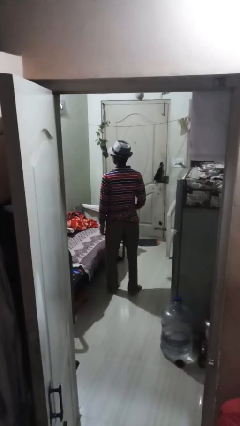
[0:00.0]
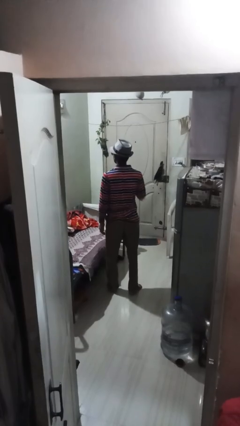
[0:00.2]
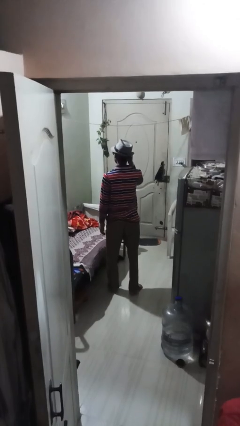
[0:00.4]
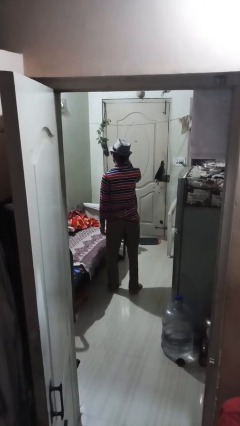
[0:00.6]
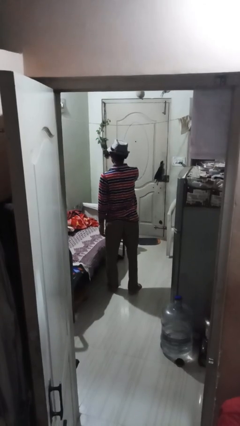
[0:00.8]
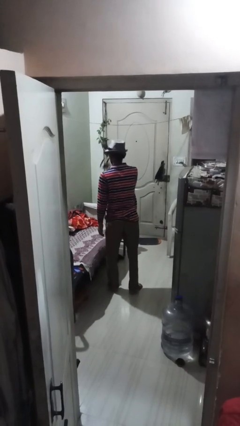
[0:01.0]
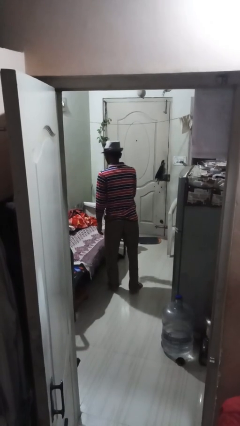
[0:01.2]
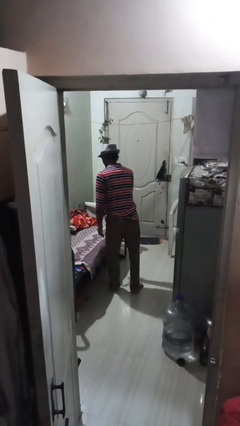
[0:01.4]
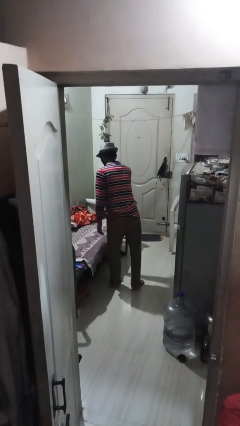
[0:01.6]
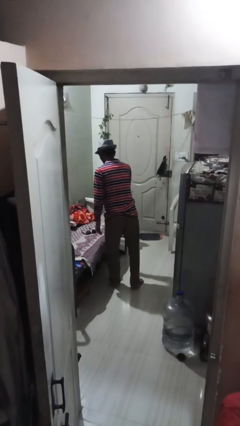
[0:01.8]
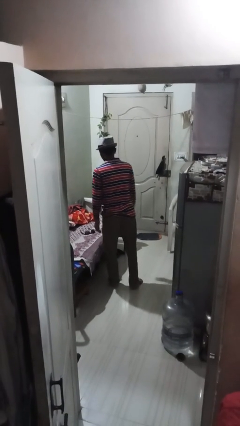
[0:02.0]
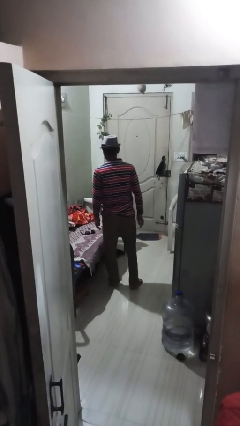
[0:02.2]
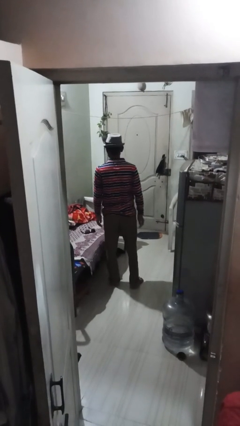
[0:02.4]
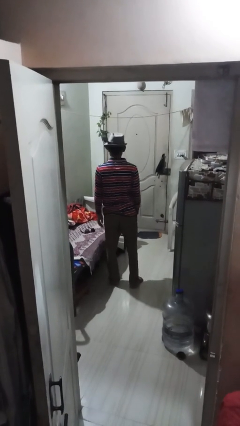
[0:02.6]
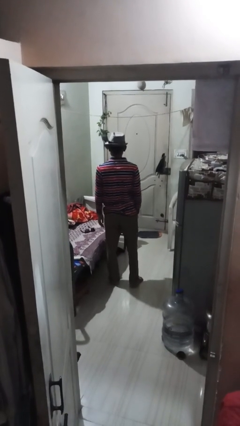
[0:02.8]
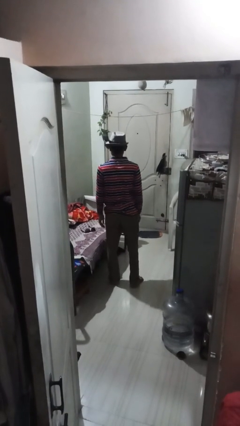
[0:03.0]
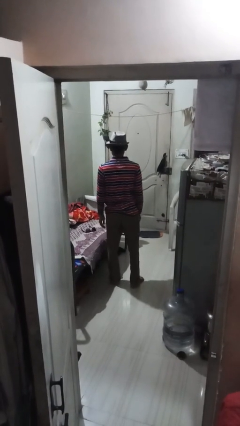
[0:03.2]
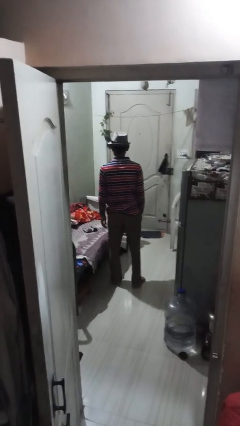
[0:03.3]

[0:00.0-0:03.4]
person takes off sunglasses

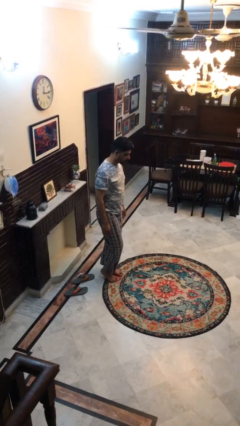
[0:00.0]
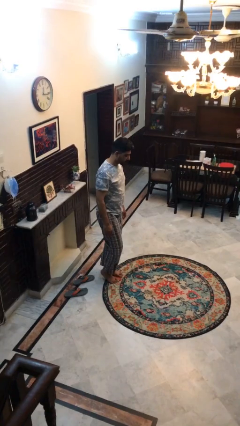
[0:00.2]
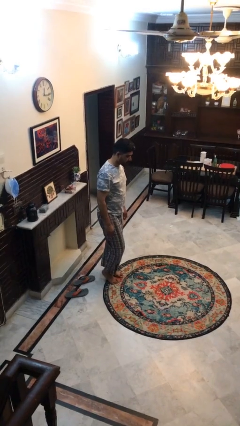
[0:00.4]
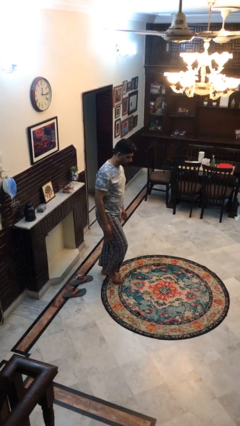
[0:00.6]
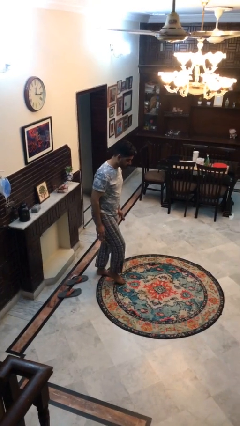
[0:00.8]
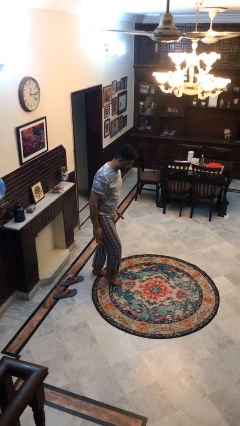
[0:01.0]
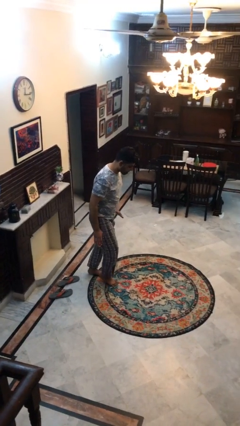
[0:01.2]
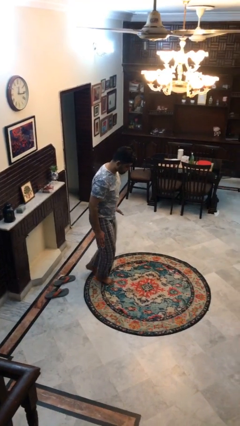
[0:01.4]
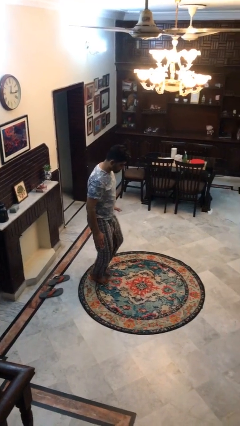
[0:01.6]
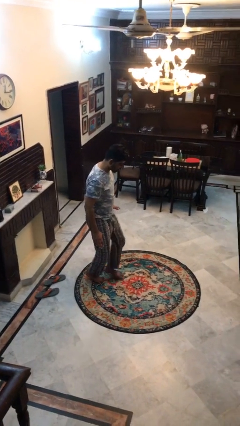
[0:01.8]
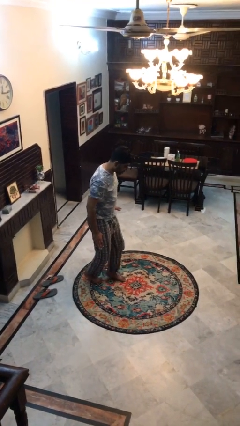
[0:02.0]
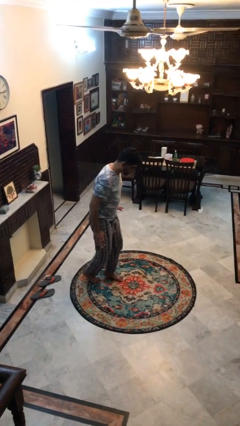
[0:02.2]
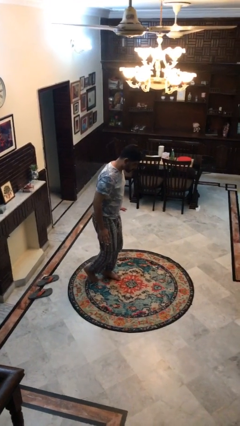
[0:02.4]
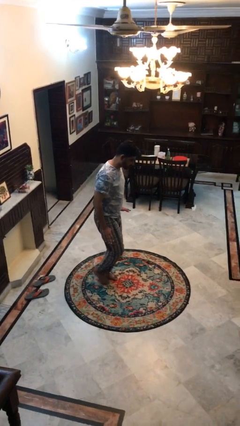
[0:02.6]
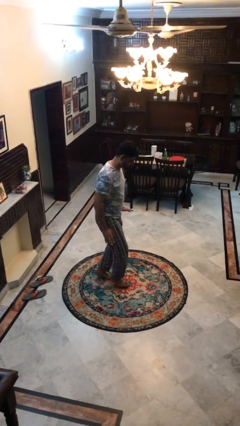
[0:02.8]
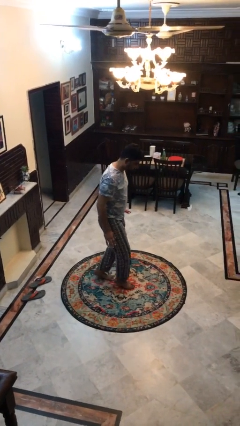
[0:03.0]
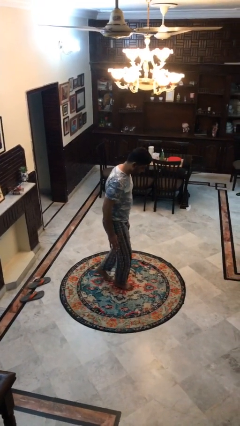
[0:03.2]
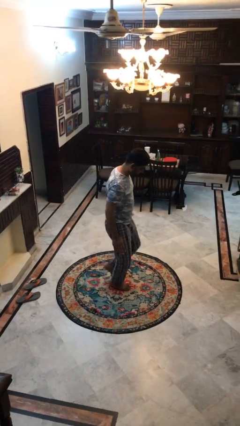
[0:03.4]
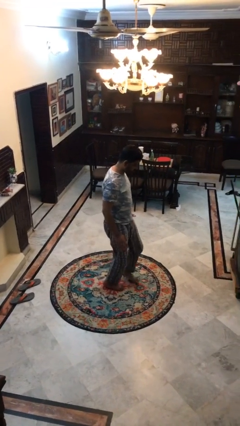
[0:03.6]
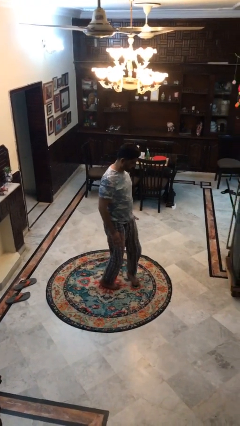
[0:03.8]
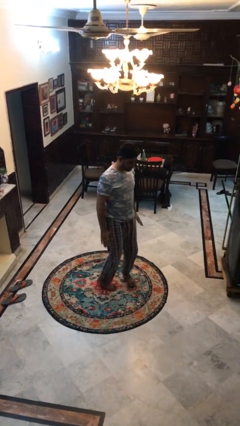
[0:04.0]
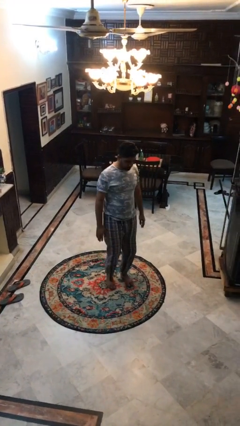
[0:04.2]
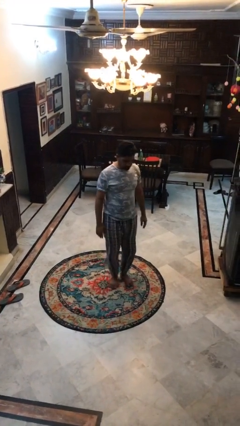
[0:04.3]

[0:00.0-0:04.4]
person walks tiptoe

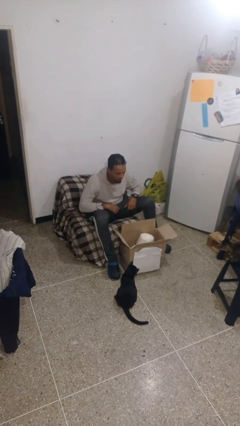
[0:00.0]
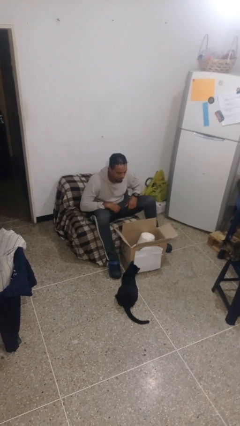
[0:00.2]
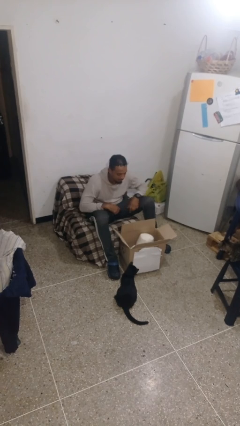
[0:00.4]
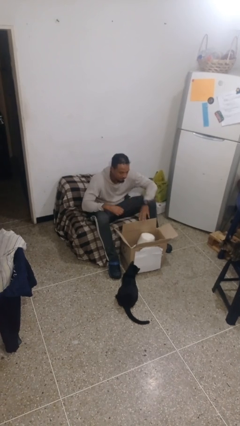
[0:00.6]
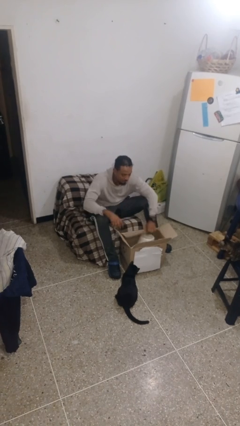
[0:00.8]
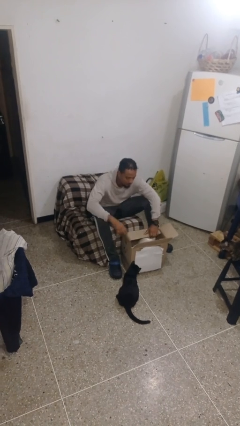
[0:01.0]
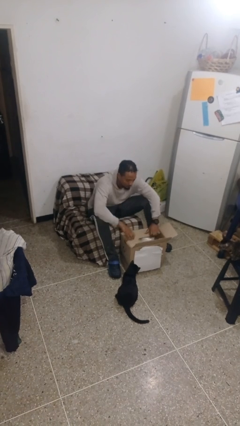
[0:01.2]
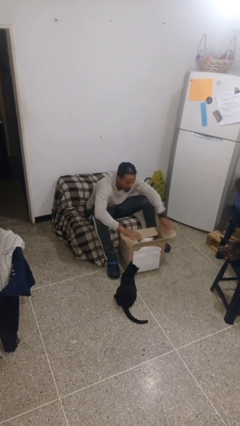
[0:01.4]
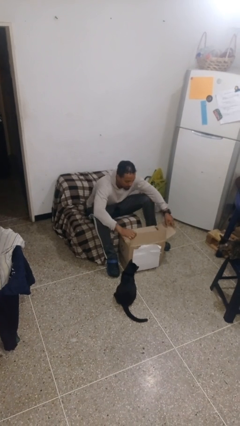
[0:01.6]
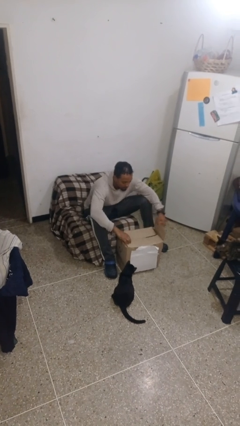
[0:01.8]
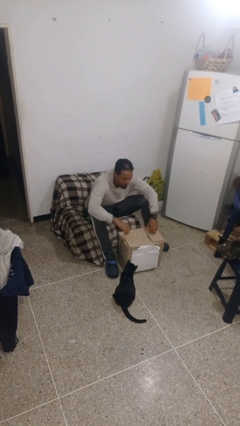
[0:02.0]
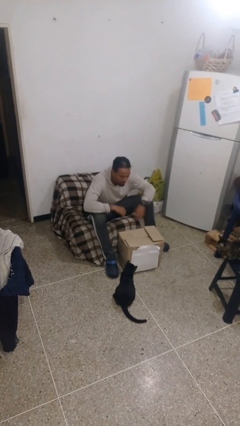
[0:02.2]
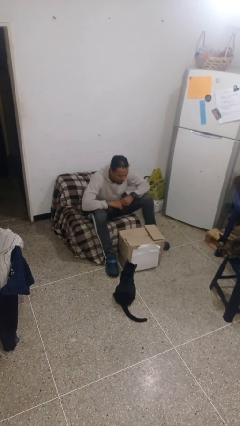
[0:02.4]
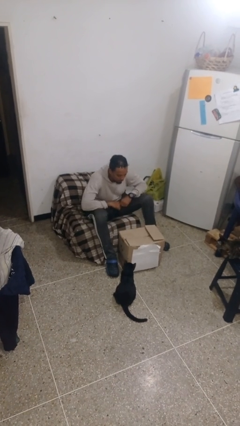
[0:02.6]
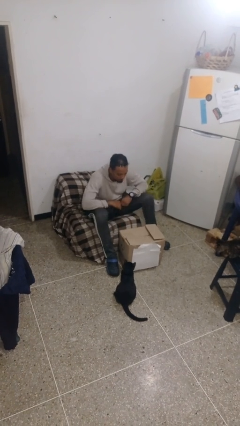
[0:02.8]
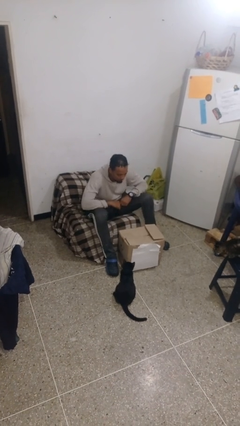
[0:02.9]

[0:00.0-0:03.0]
person closes box

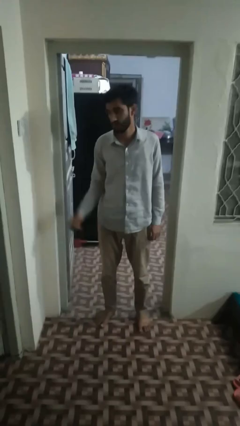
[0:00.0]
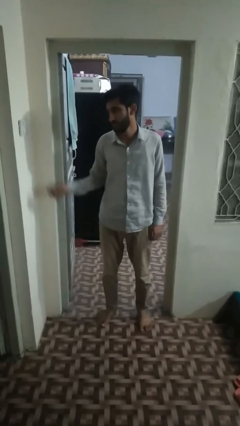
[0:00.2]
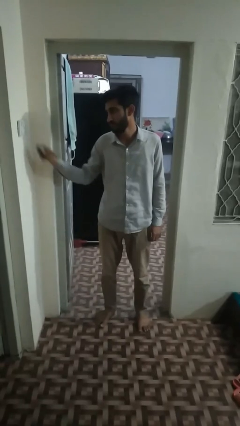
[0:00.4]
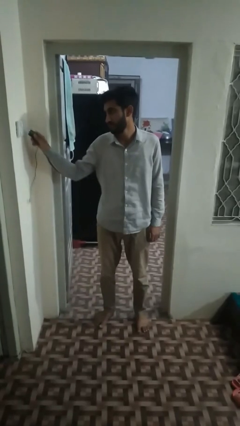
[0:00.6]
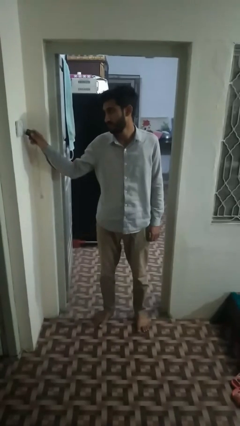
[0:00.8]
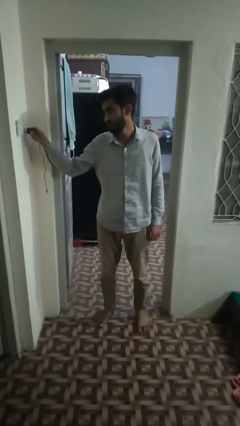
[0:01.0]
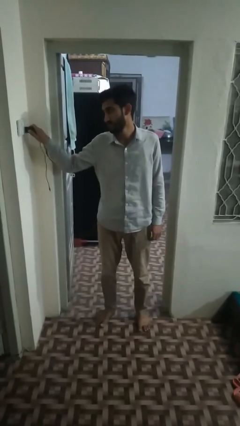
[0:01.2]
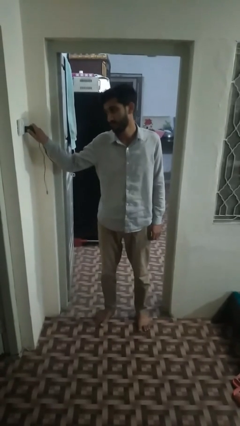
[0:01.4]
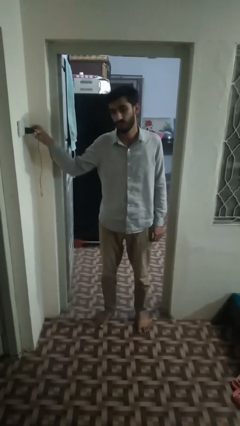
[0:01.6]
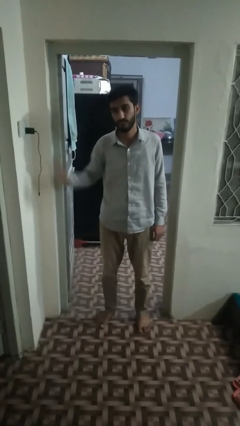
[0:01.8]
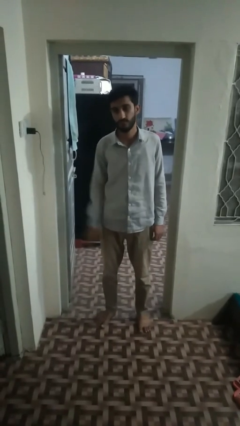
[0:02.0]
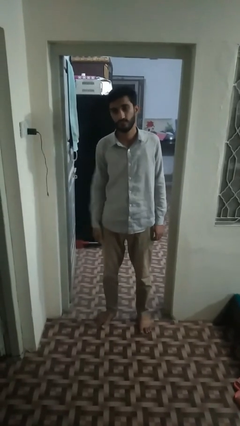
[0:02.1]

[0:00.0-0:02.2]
person plugs into electrical socket

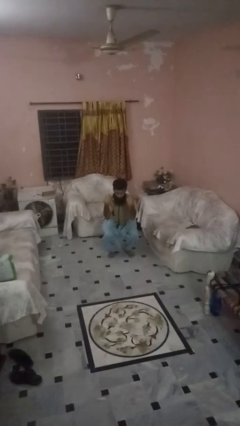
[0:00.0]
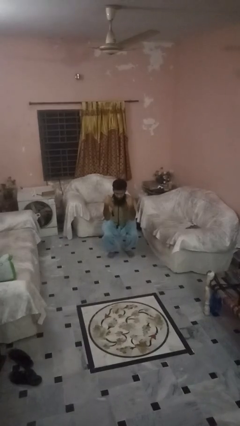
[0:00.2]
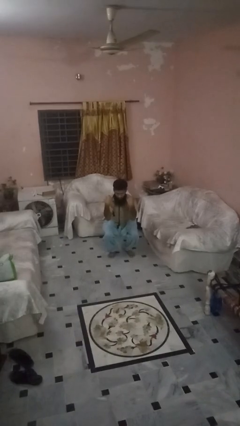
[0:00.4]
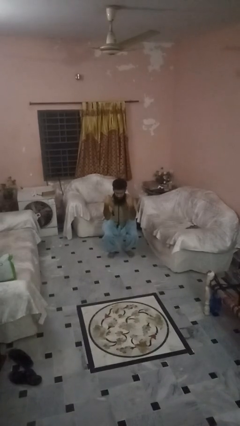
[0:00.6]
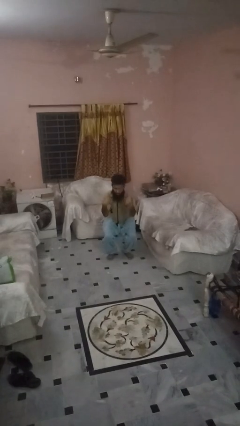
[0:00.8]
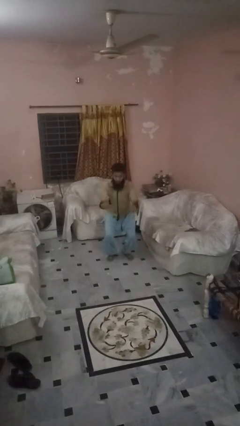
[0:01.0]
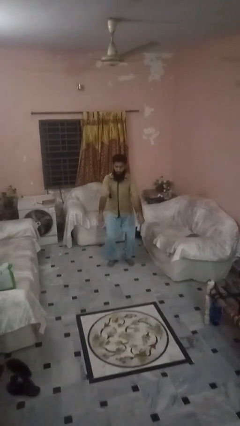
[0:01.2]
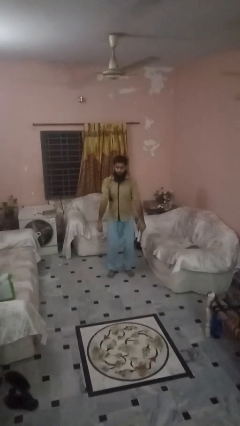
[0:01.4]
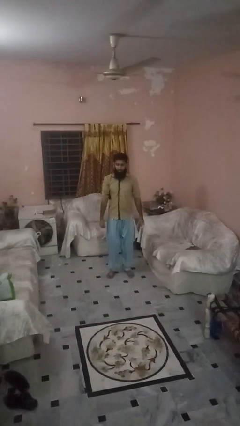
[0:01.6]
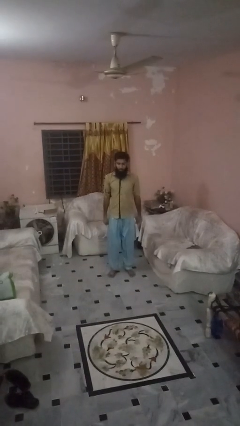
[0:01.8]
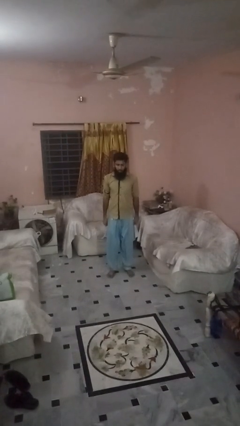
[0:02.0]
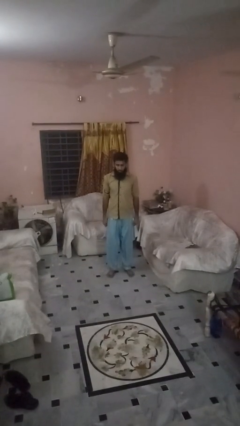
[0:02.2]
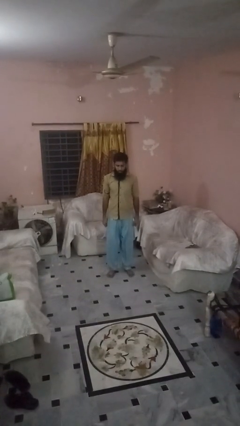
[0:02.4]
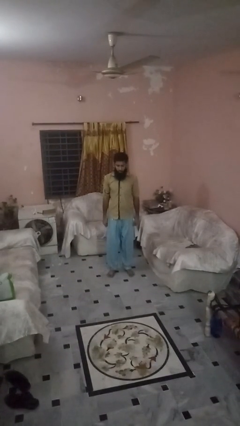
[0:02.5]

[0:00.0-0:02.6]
person stands up

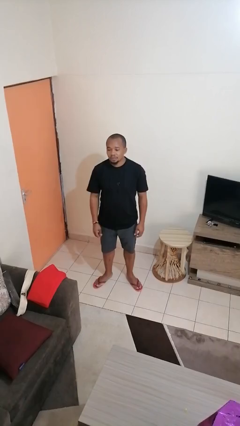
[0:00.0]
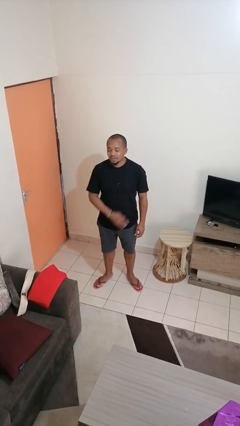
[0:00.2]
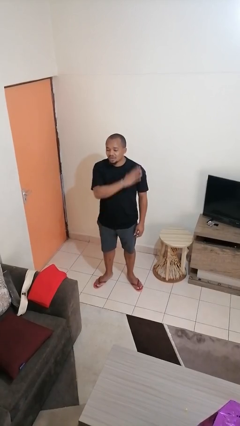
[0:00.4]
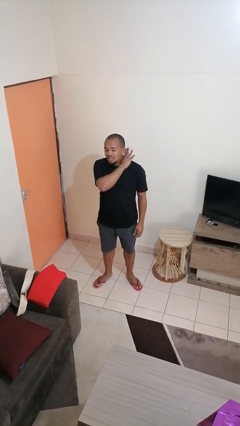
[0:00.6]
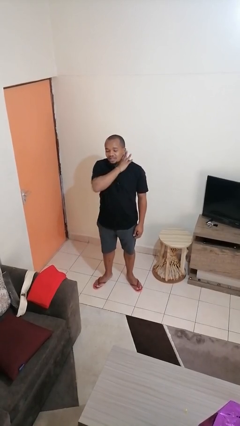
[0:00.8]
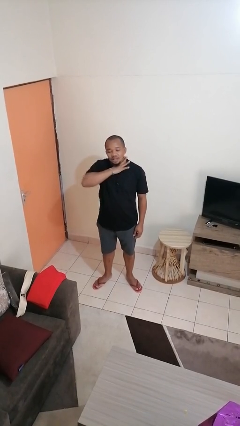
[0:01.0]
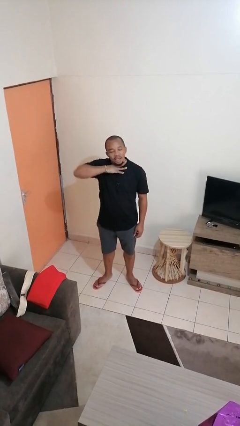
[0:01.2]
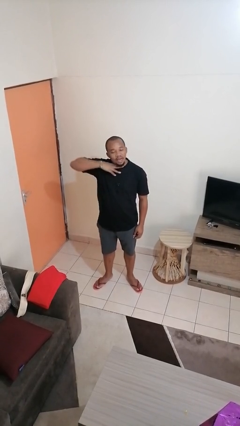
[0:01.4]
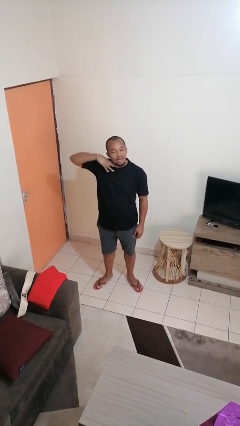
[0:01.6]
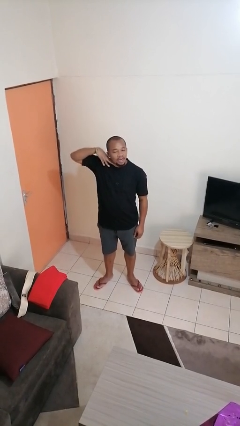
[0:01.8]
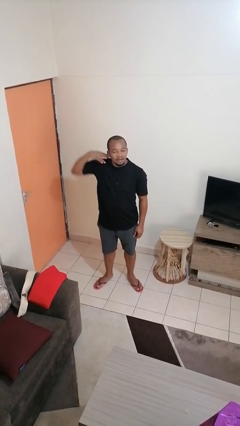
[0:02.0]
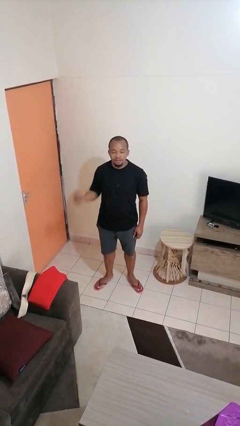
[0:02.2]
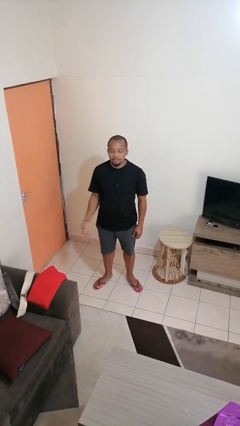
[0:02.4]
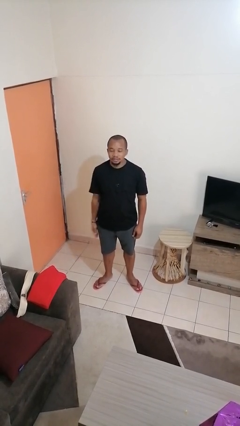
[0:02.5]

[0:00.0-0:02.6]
person gestures cut
